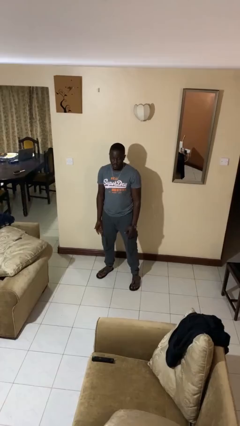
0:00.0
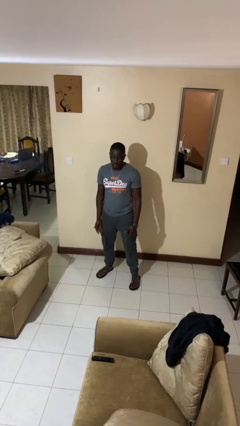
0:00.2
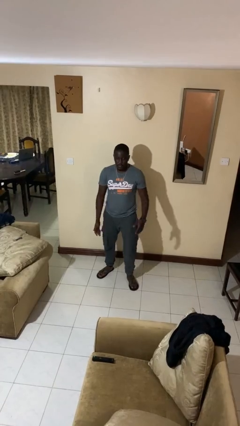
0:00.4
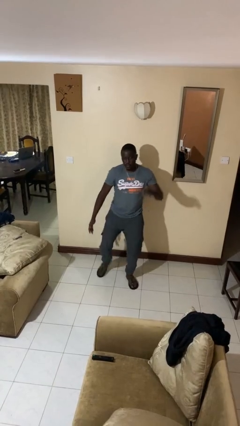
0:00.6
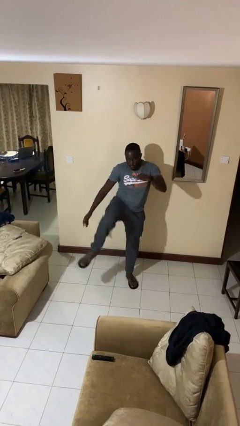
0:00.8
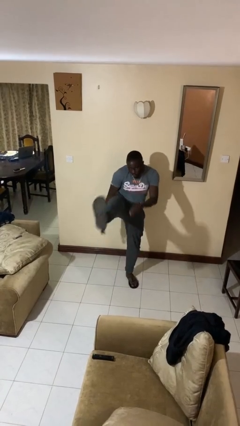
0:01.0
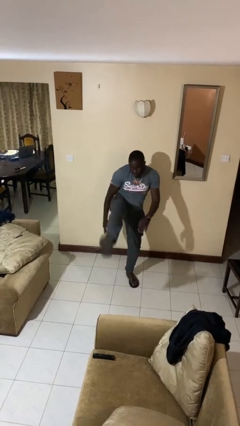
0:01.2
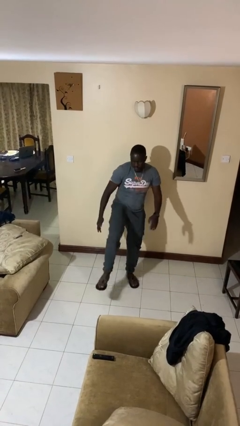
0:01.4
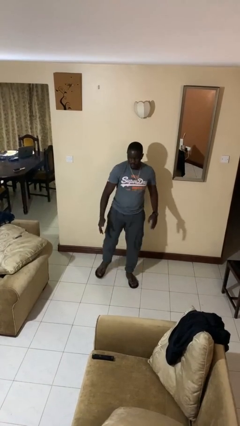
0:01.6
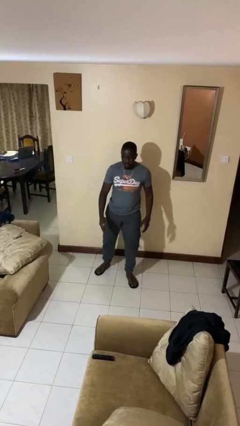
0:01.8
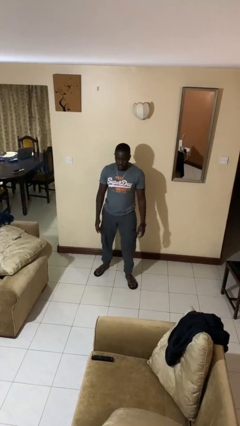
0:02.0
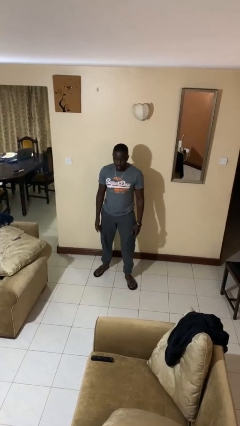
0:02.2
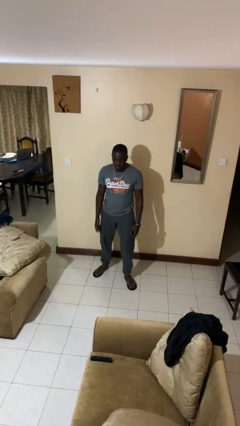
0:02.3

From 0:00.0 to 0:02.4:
person karate kicks

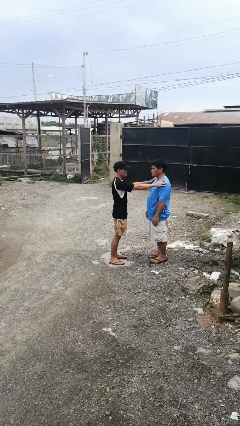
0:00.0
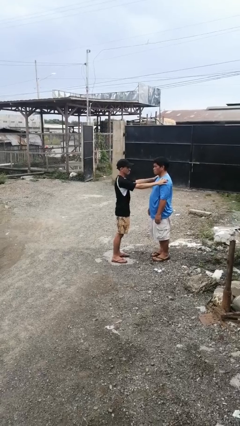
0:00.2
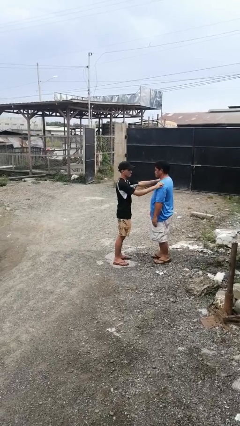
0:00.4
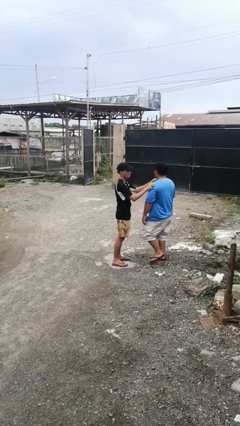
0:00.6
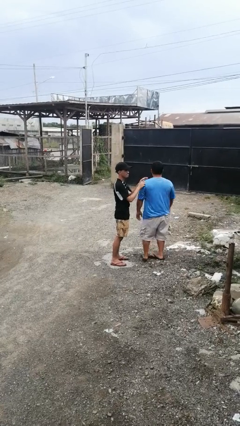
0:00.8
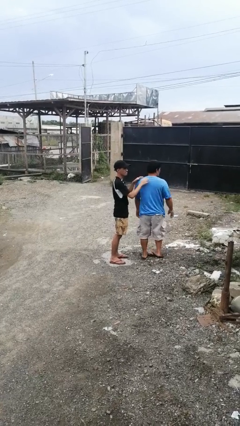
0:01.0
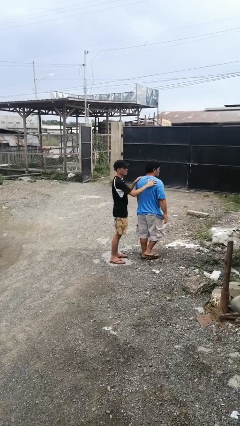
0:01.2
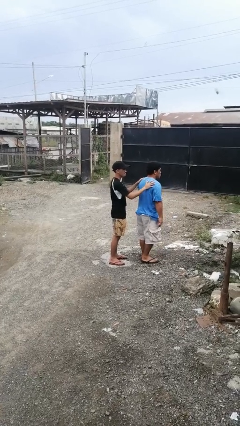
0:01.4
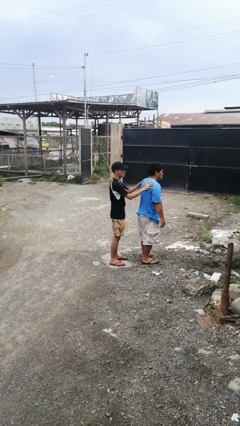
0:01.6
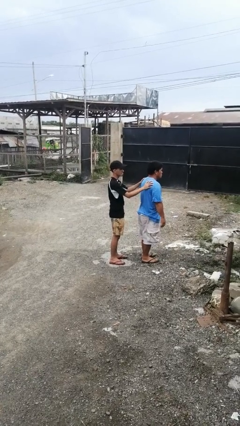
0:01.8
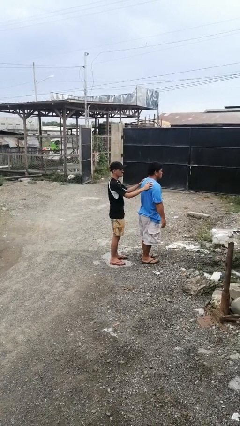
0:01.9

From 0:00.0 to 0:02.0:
person spins person around

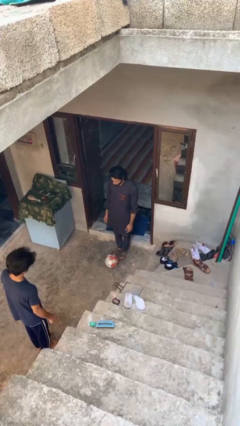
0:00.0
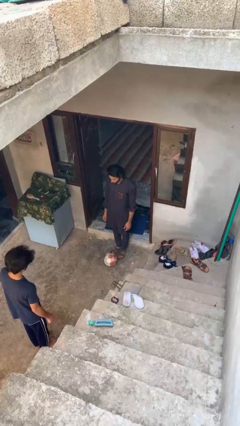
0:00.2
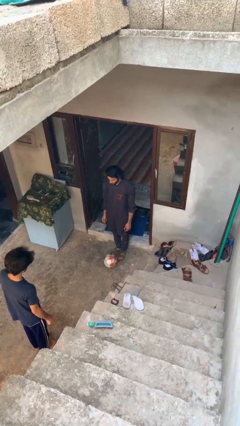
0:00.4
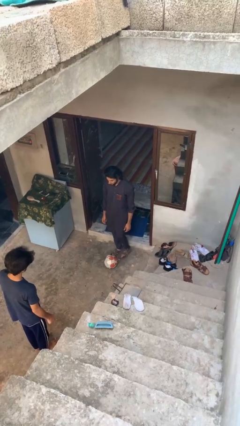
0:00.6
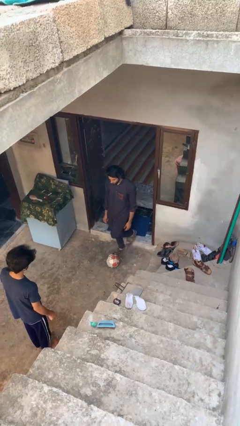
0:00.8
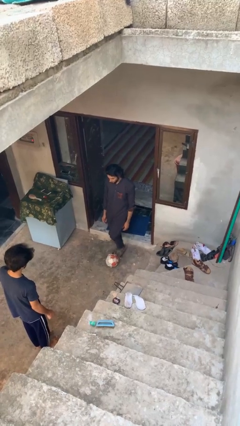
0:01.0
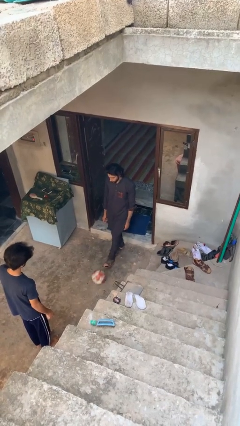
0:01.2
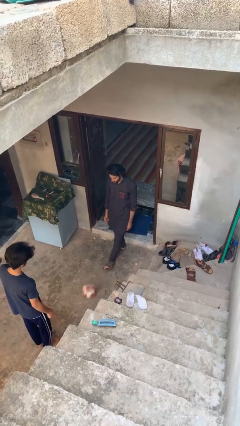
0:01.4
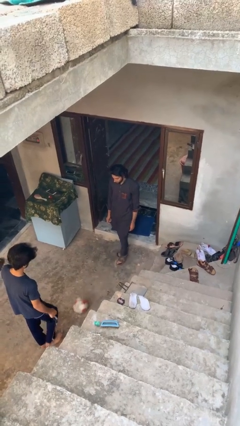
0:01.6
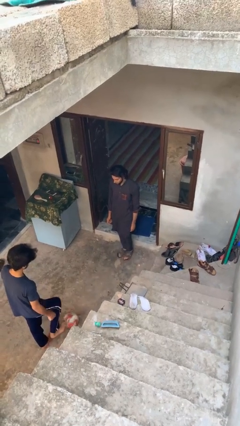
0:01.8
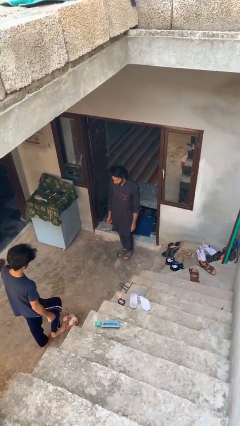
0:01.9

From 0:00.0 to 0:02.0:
person kicks object to person

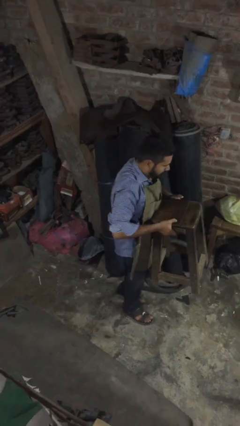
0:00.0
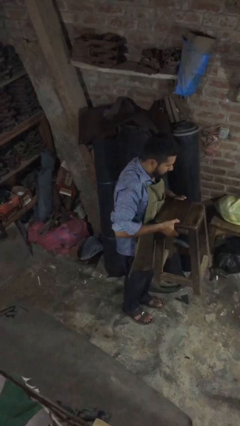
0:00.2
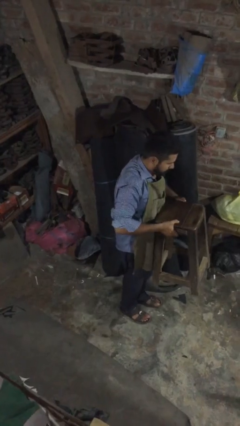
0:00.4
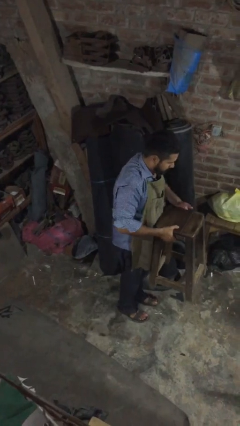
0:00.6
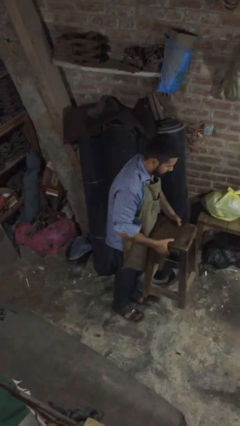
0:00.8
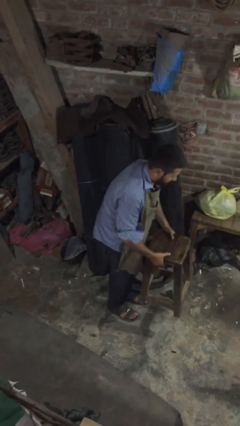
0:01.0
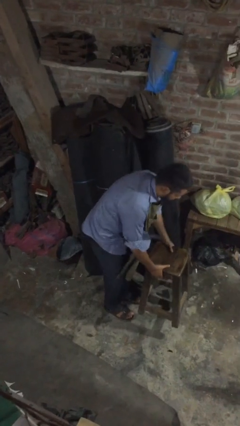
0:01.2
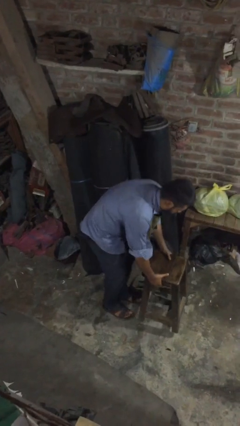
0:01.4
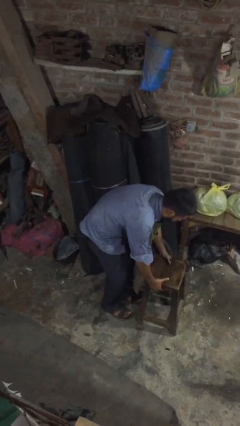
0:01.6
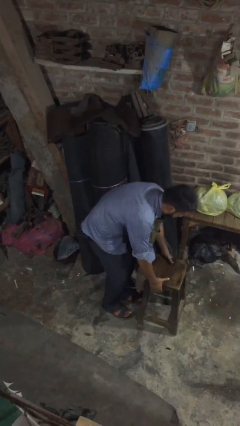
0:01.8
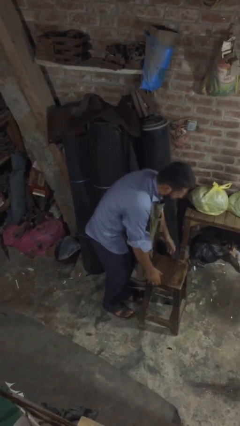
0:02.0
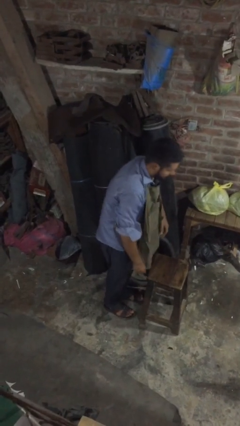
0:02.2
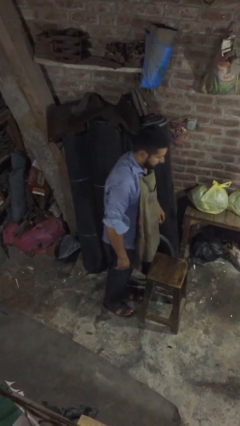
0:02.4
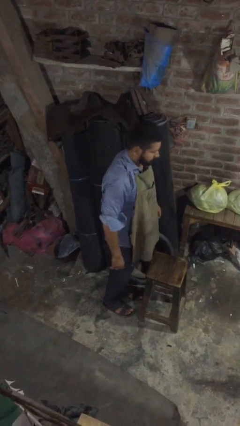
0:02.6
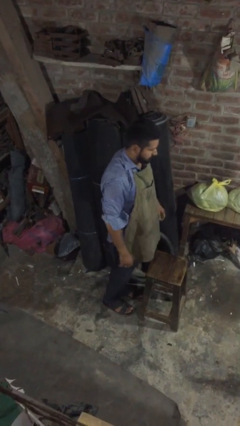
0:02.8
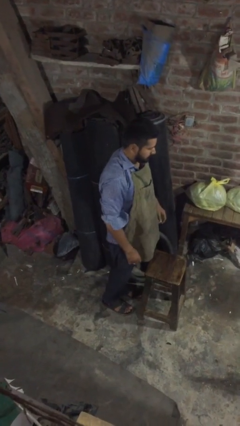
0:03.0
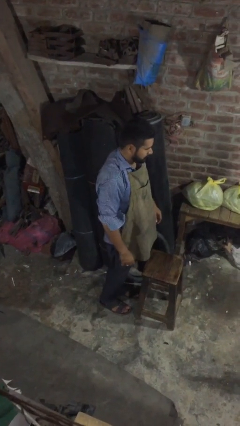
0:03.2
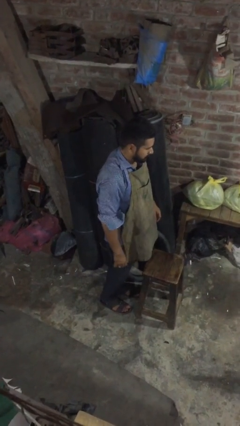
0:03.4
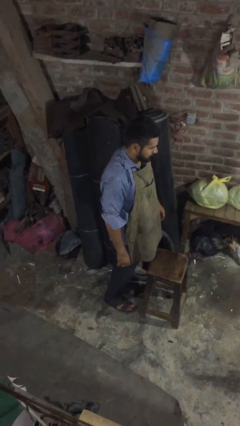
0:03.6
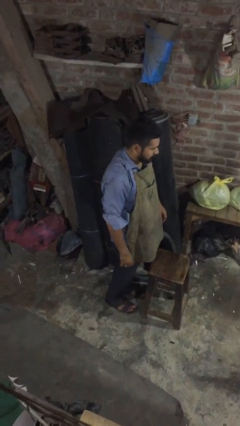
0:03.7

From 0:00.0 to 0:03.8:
person puts down object on floor

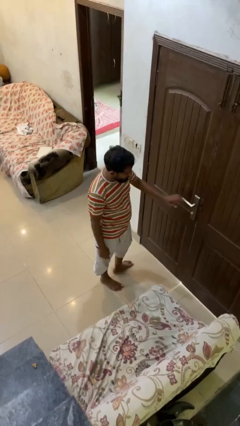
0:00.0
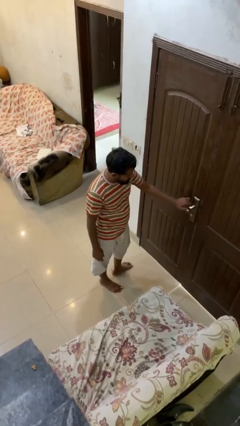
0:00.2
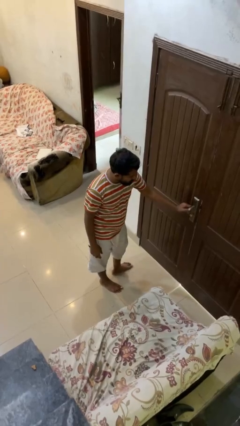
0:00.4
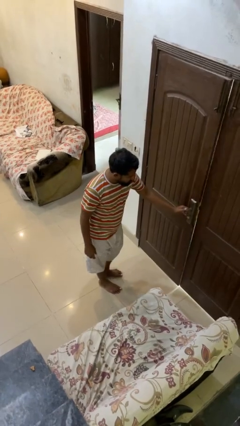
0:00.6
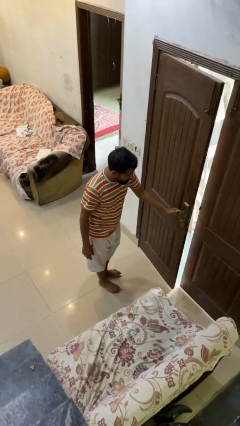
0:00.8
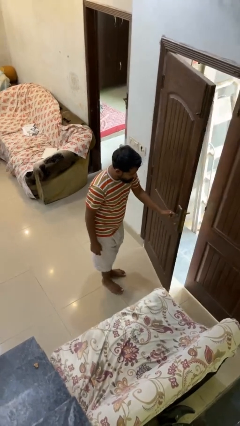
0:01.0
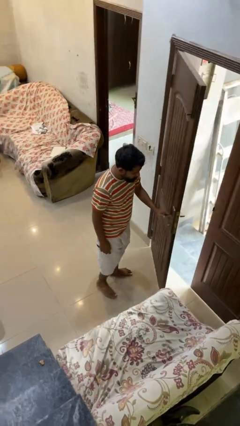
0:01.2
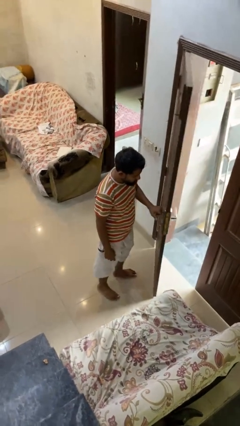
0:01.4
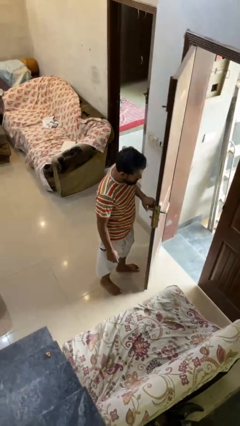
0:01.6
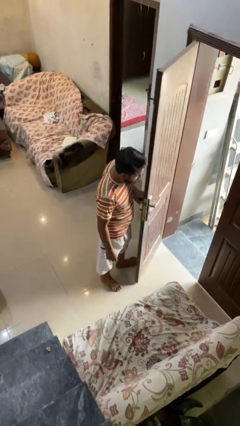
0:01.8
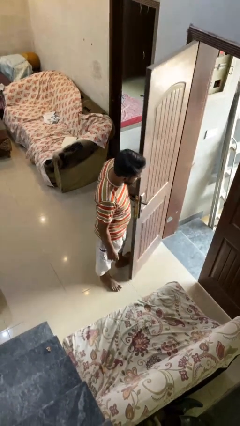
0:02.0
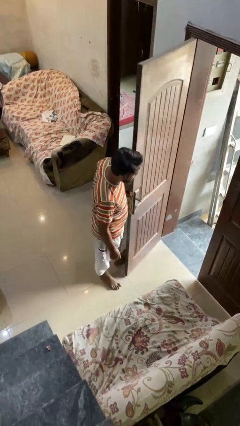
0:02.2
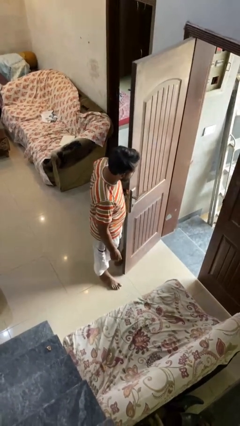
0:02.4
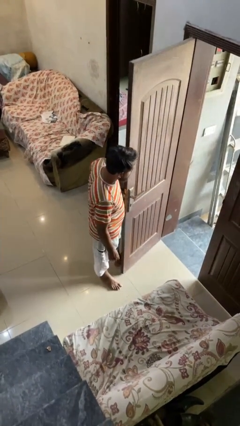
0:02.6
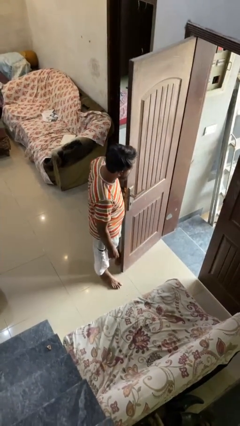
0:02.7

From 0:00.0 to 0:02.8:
person opens facility door

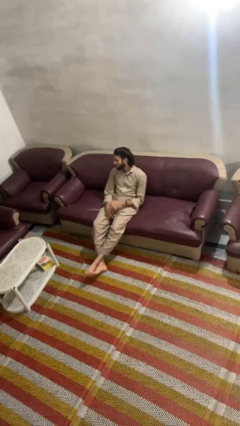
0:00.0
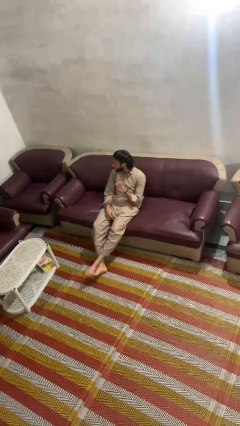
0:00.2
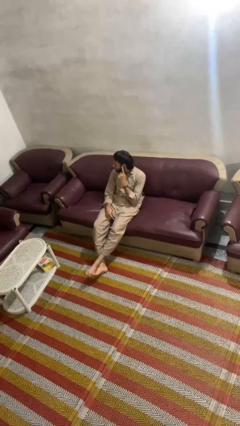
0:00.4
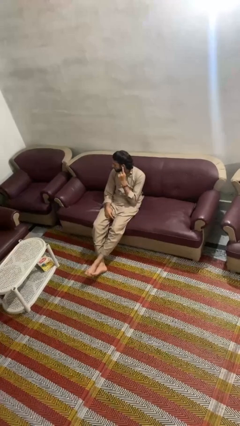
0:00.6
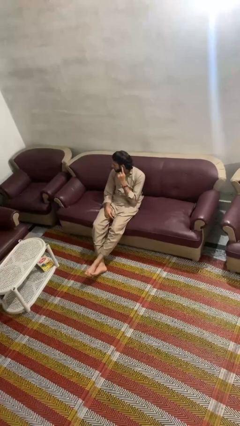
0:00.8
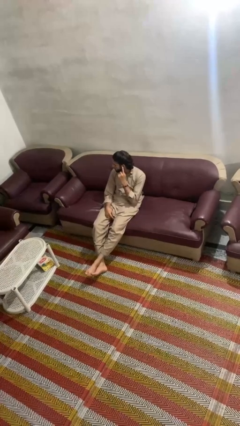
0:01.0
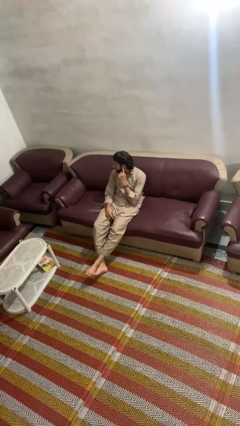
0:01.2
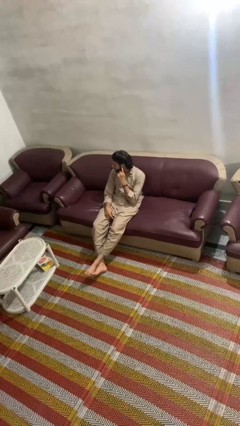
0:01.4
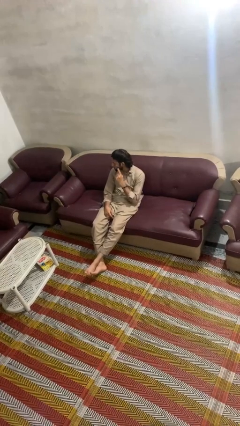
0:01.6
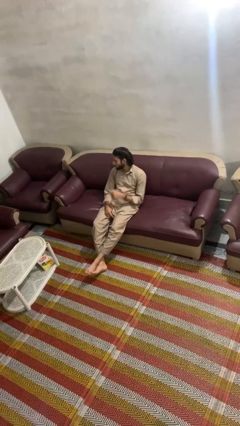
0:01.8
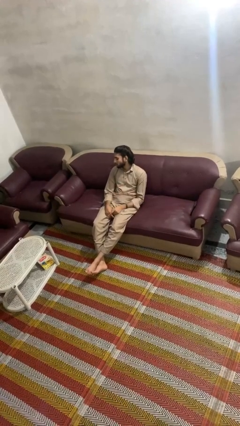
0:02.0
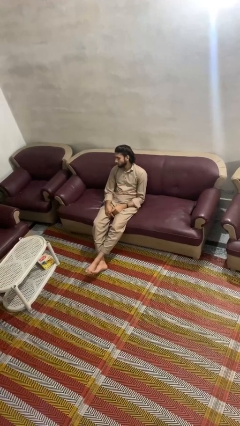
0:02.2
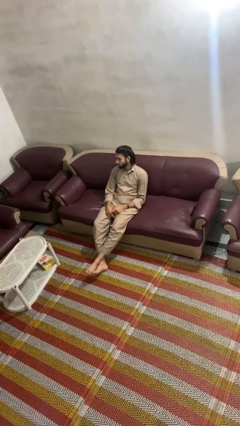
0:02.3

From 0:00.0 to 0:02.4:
person gestures listen closely

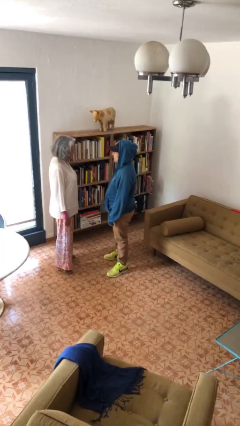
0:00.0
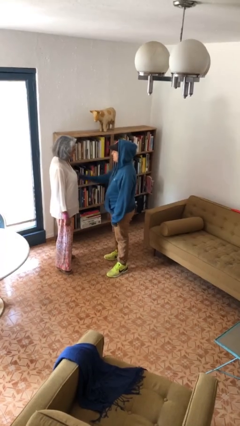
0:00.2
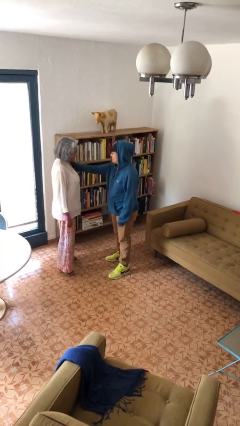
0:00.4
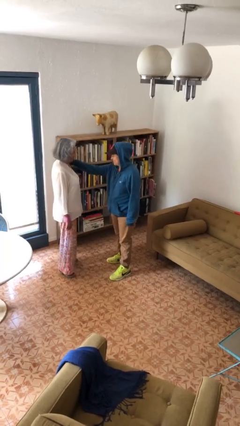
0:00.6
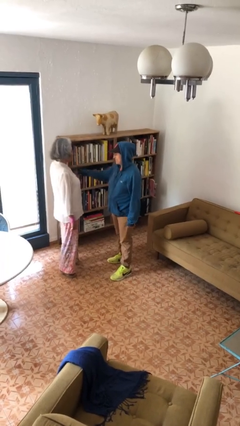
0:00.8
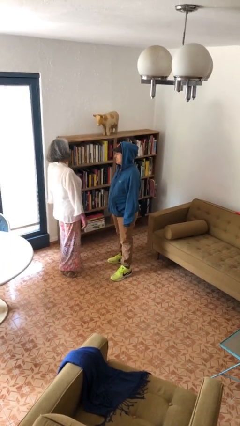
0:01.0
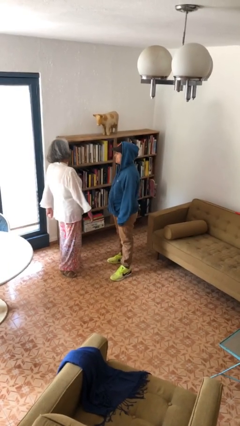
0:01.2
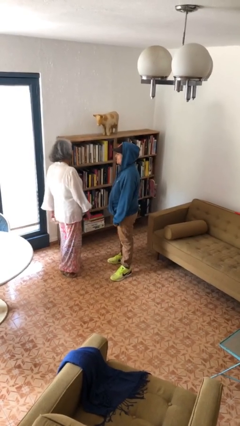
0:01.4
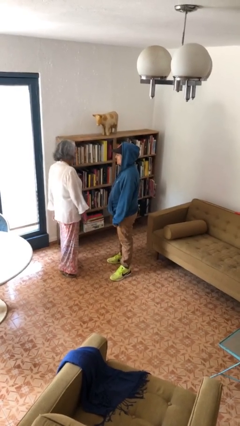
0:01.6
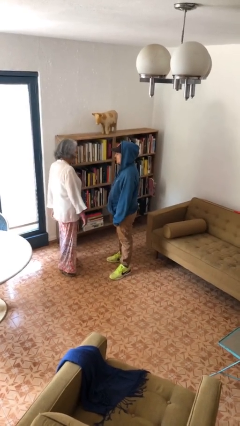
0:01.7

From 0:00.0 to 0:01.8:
person shoves person
